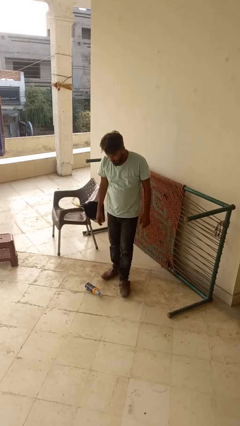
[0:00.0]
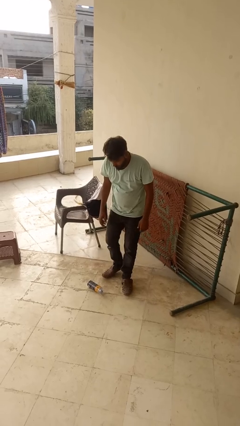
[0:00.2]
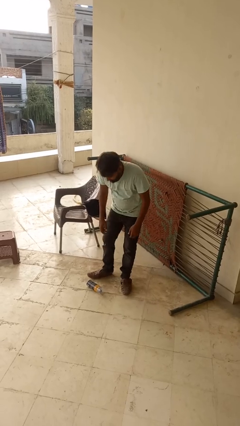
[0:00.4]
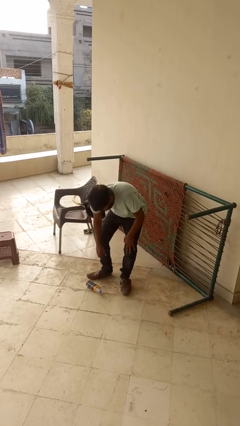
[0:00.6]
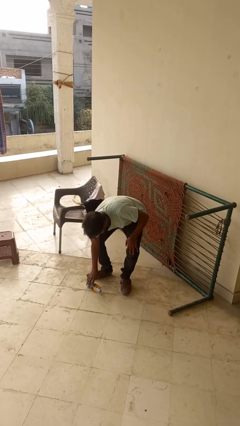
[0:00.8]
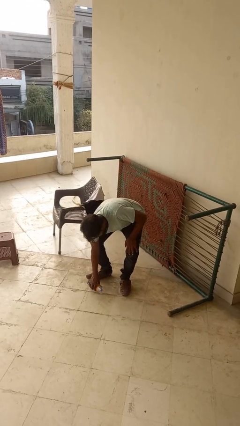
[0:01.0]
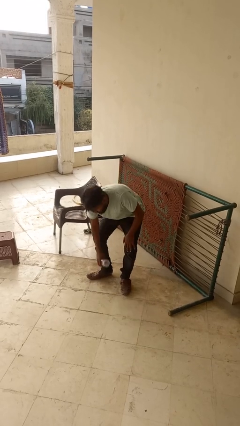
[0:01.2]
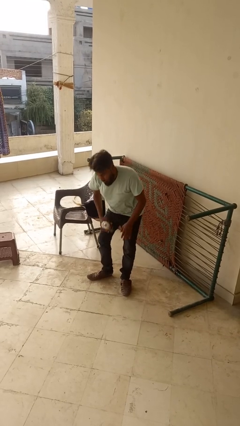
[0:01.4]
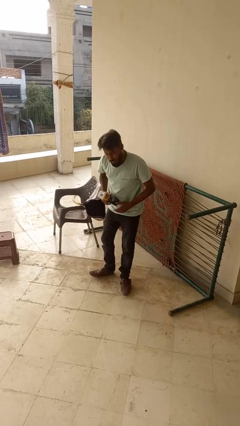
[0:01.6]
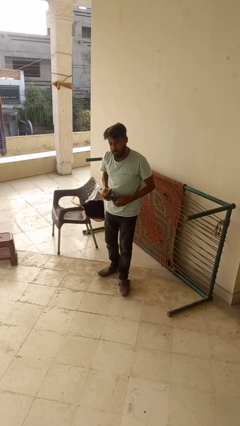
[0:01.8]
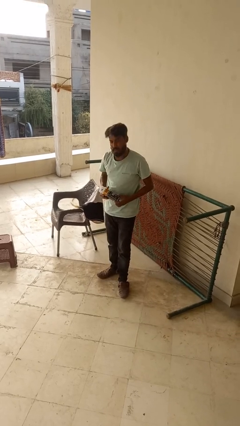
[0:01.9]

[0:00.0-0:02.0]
person picks up object from floor

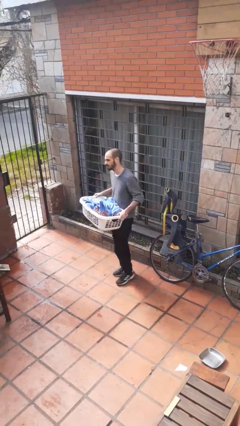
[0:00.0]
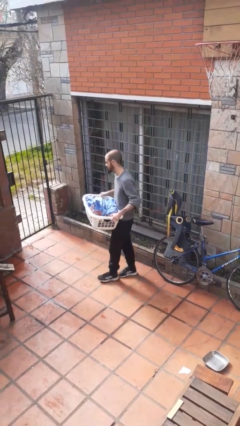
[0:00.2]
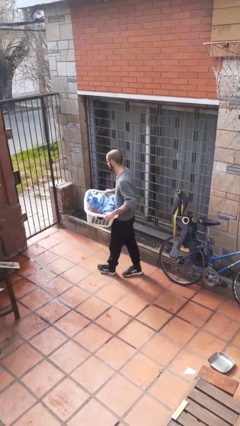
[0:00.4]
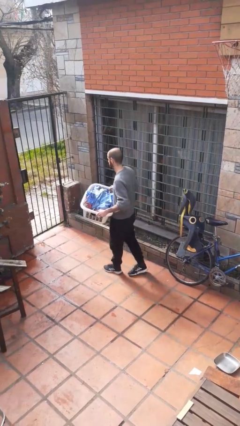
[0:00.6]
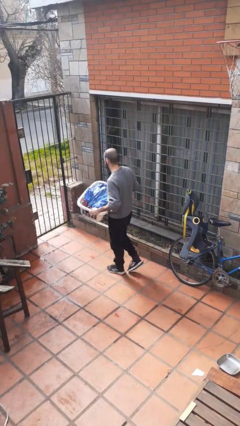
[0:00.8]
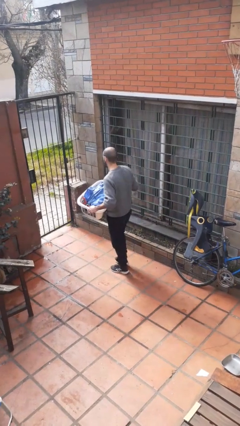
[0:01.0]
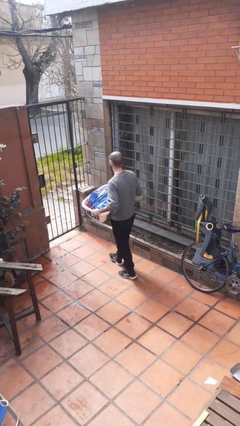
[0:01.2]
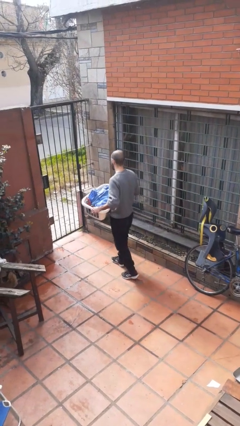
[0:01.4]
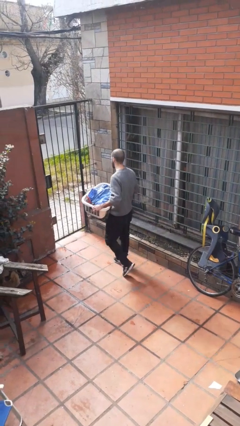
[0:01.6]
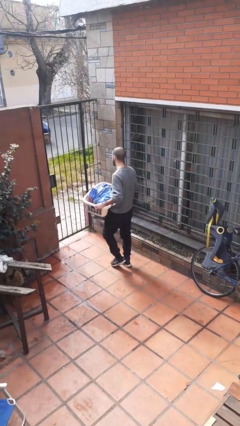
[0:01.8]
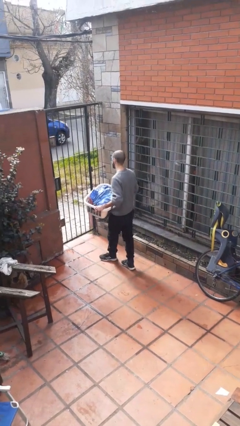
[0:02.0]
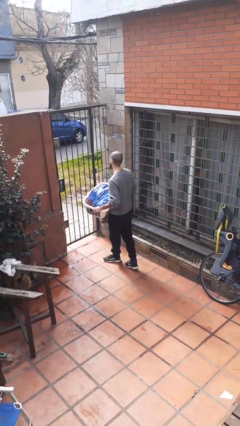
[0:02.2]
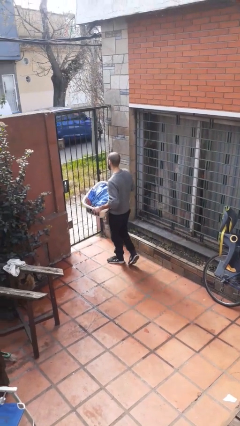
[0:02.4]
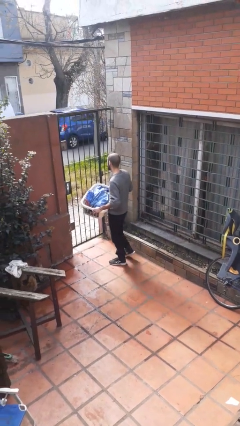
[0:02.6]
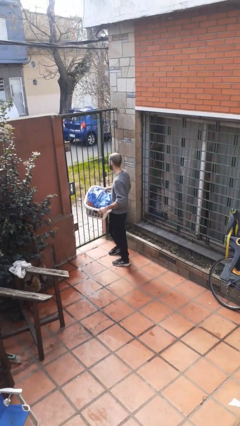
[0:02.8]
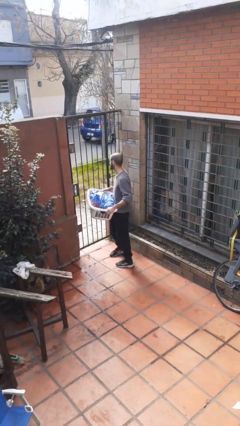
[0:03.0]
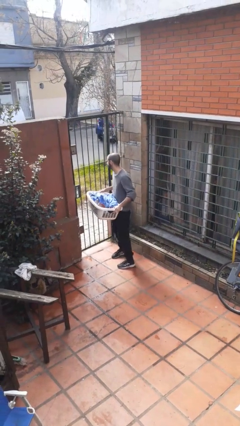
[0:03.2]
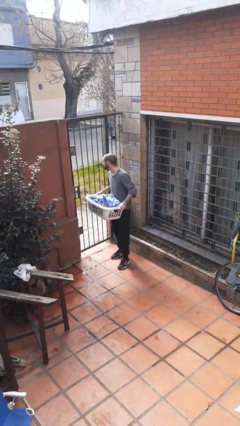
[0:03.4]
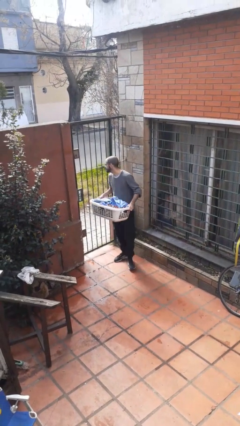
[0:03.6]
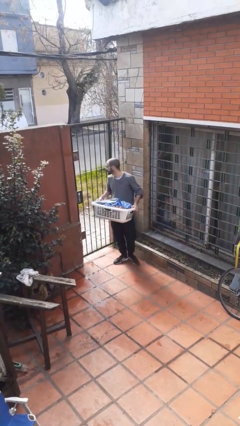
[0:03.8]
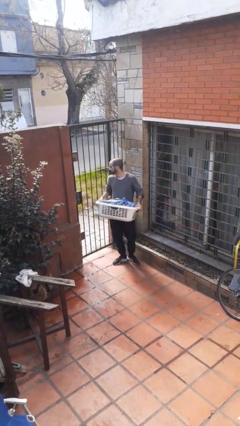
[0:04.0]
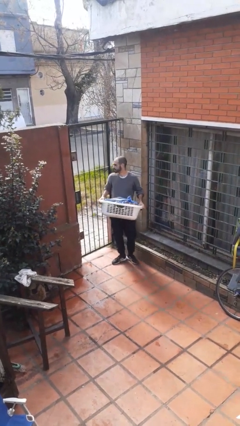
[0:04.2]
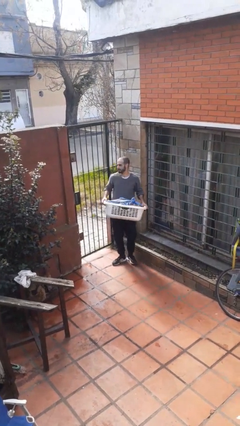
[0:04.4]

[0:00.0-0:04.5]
person carries laundry basket

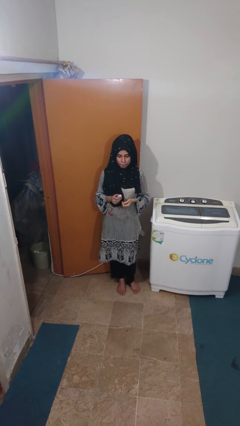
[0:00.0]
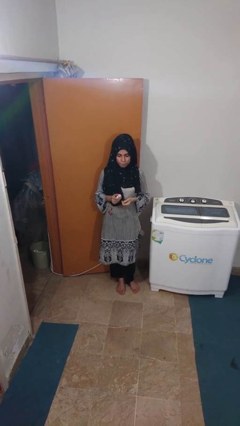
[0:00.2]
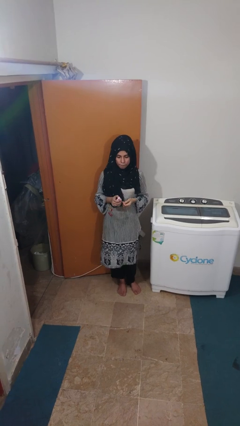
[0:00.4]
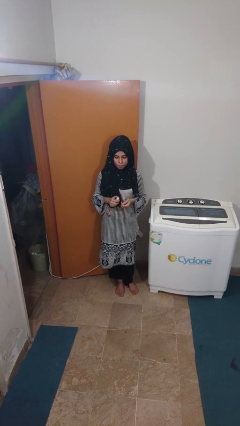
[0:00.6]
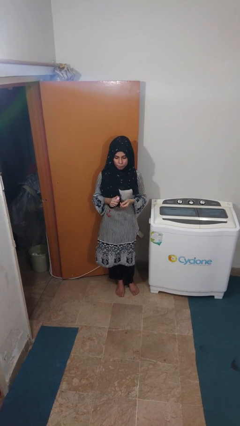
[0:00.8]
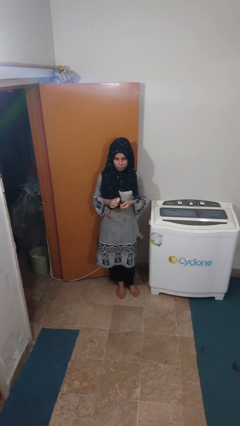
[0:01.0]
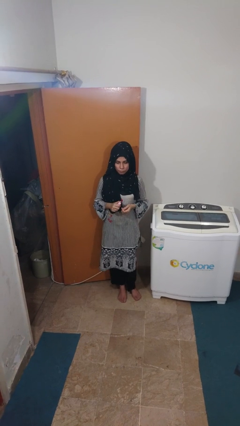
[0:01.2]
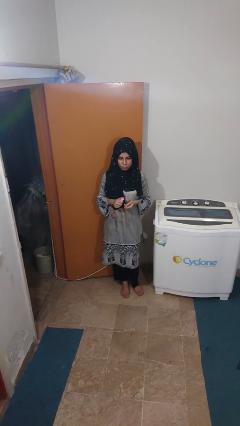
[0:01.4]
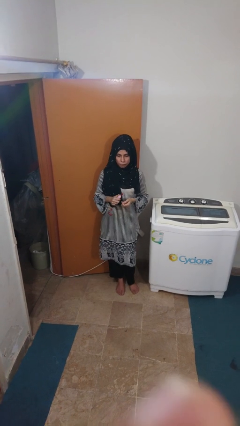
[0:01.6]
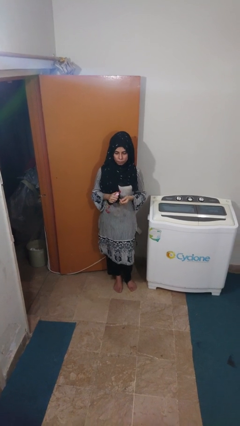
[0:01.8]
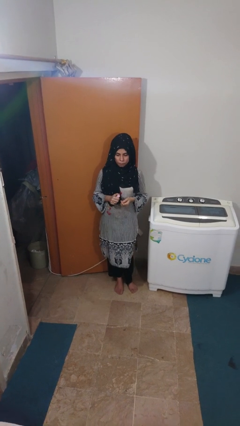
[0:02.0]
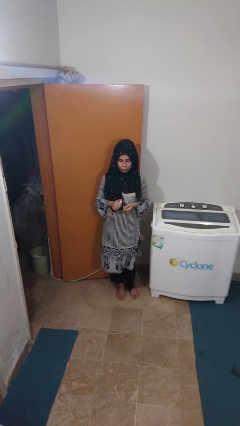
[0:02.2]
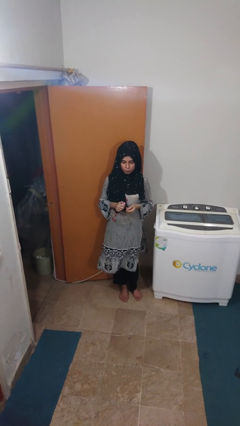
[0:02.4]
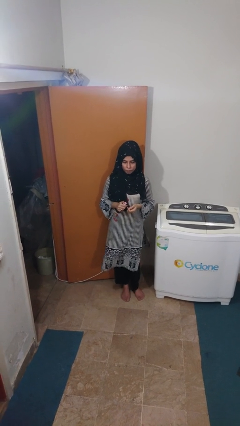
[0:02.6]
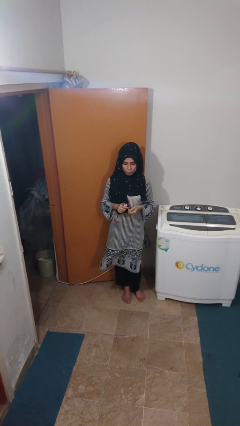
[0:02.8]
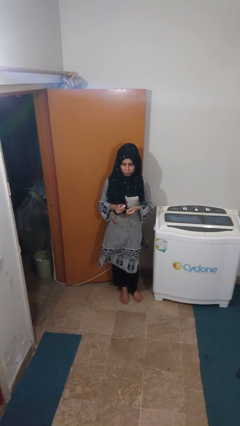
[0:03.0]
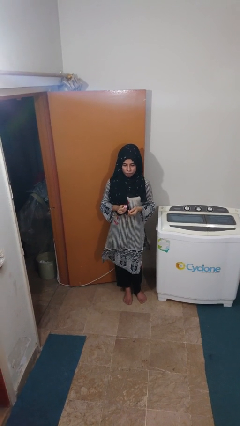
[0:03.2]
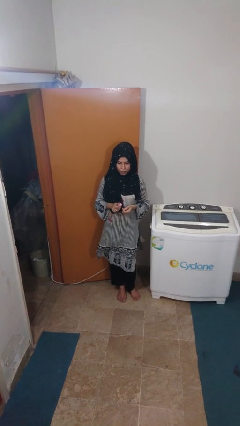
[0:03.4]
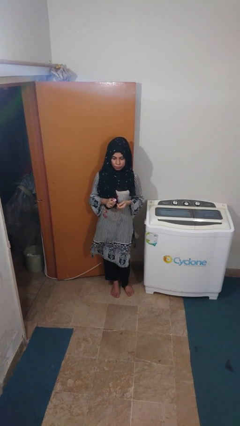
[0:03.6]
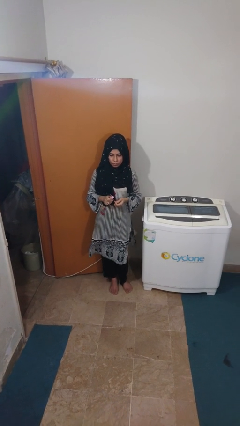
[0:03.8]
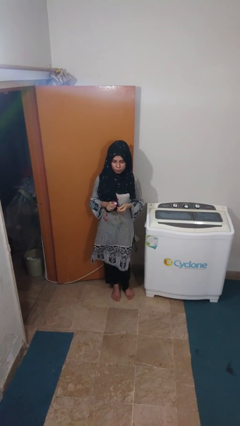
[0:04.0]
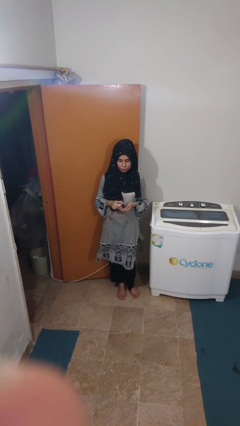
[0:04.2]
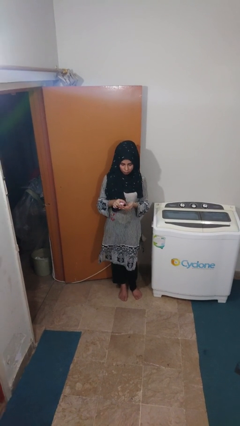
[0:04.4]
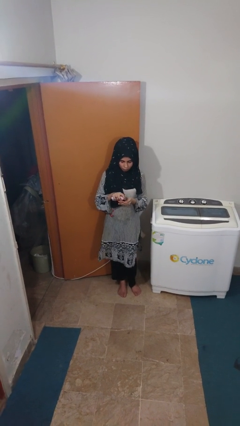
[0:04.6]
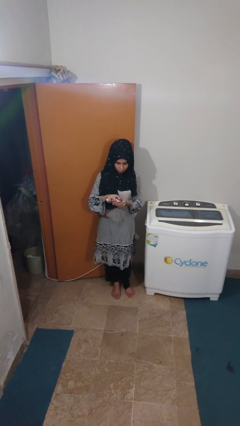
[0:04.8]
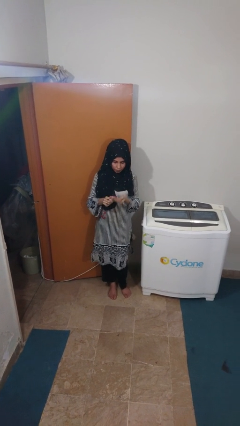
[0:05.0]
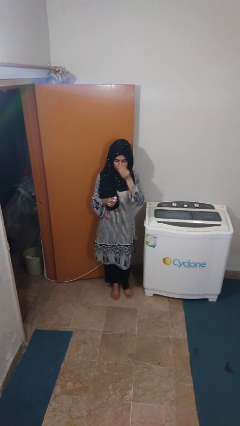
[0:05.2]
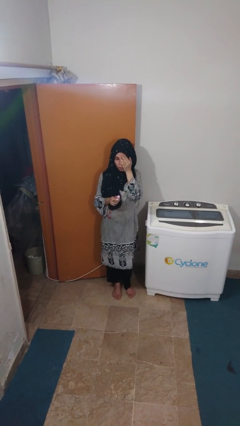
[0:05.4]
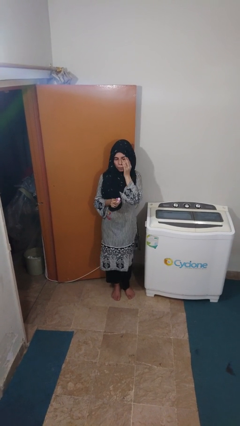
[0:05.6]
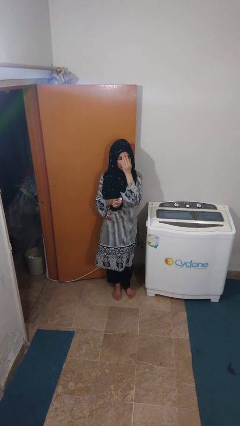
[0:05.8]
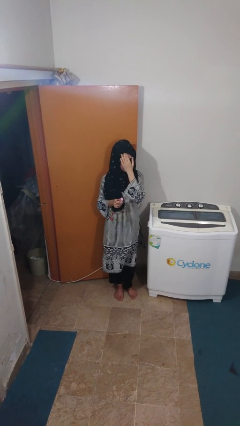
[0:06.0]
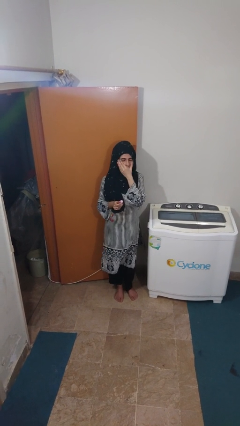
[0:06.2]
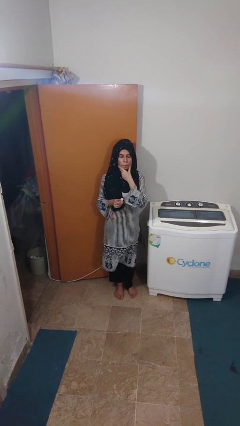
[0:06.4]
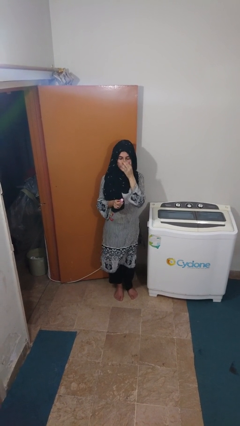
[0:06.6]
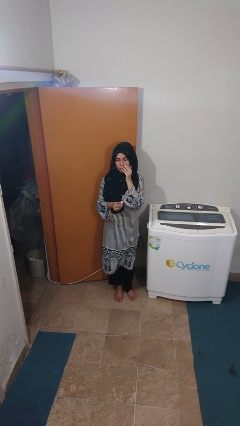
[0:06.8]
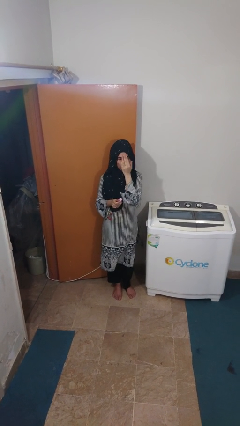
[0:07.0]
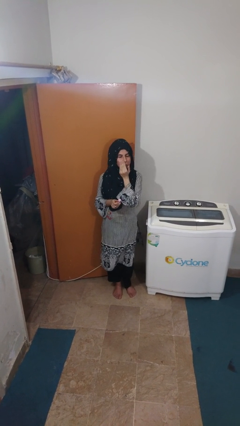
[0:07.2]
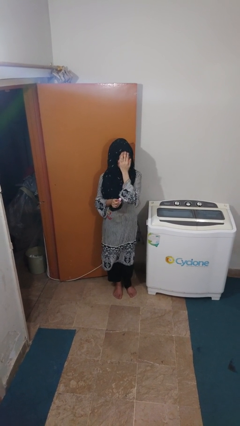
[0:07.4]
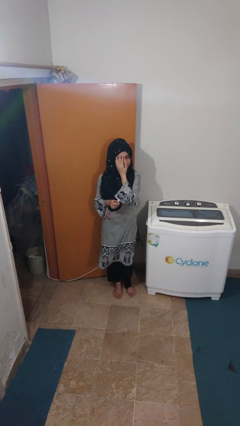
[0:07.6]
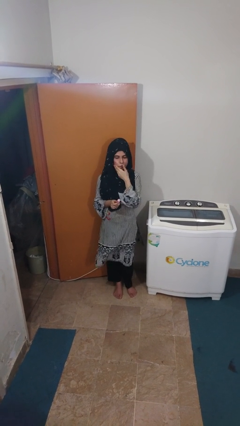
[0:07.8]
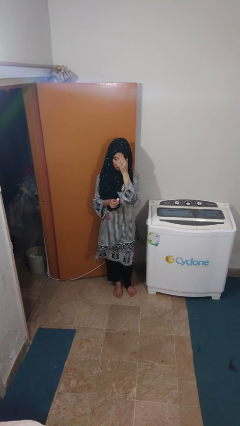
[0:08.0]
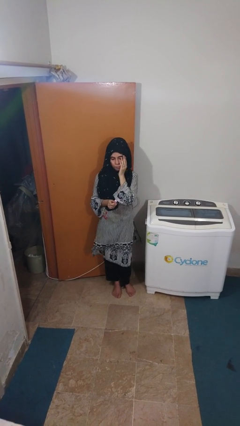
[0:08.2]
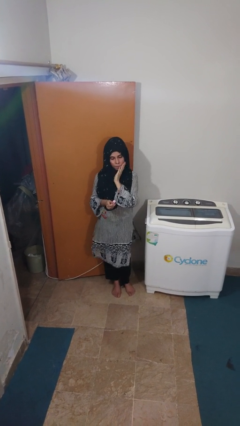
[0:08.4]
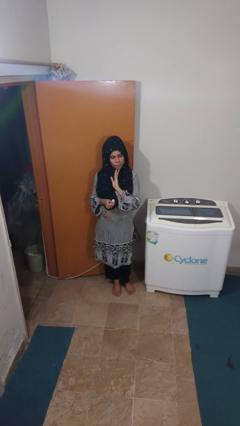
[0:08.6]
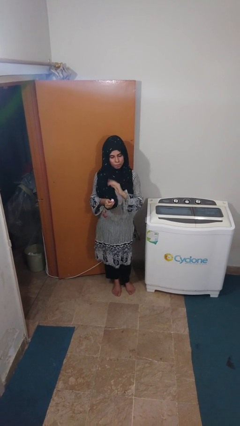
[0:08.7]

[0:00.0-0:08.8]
person applies sunscreen

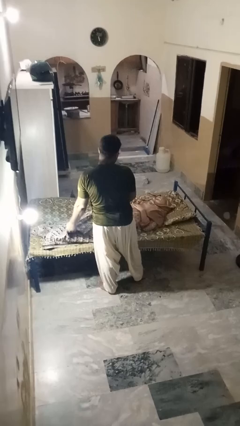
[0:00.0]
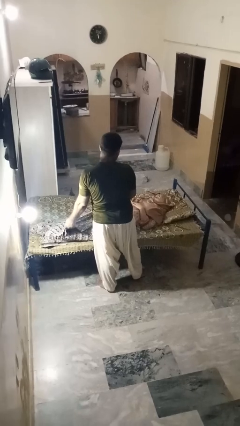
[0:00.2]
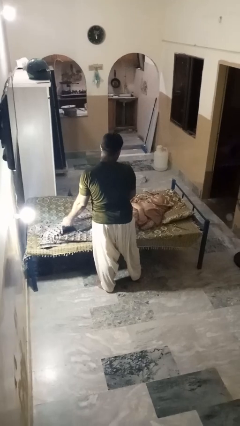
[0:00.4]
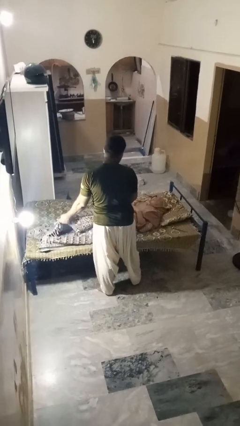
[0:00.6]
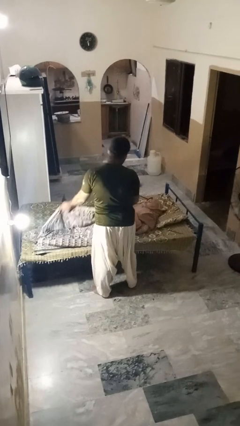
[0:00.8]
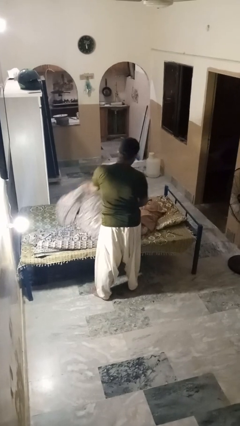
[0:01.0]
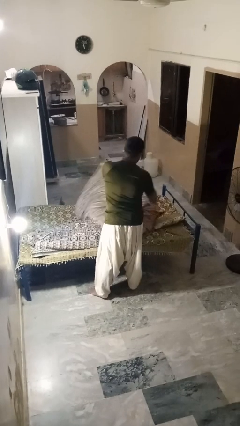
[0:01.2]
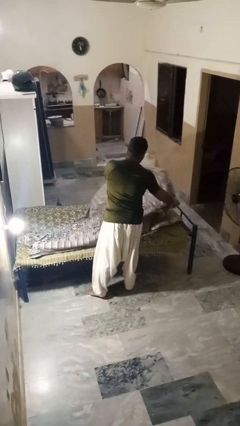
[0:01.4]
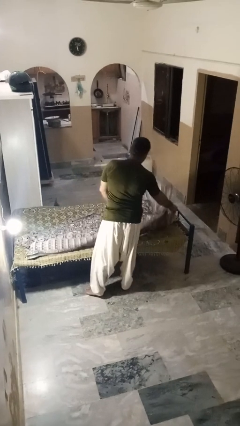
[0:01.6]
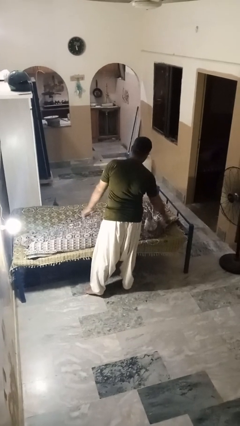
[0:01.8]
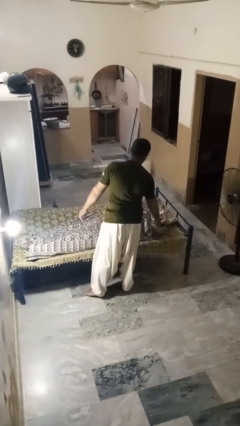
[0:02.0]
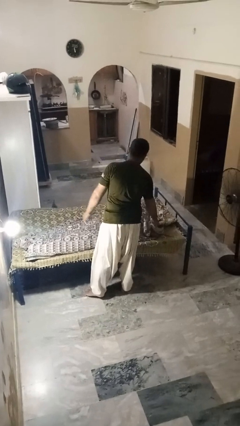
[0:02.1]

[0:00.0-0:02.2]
person covers friend with blanket

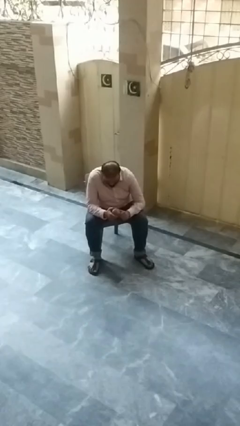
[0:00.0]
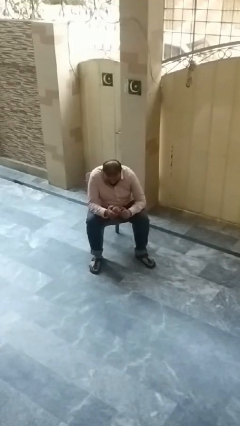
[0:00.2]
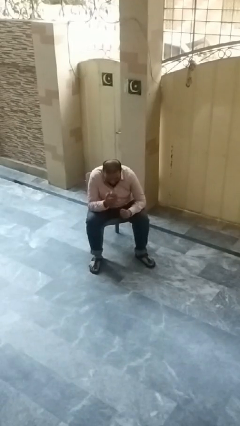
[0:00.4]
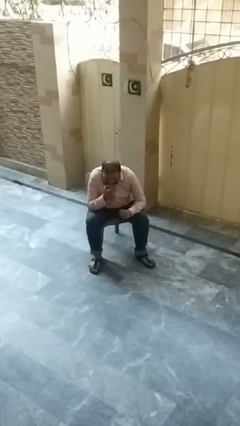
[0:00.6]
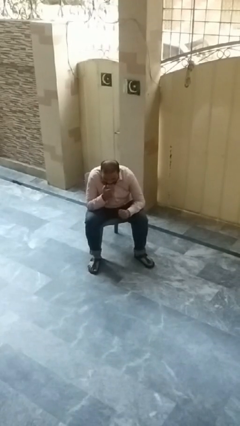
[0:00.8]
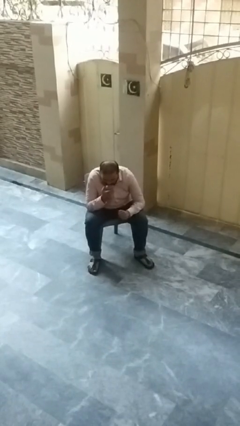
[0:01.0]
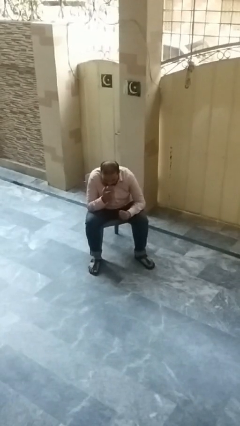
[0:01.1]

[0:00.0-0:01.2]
person eats apple
